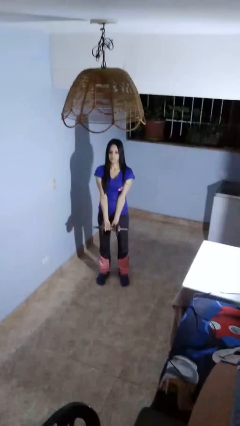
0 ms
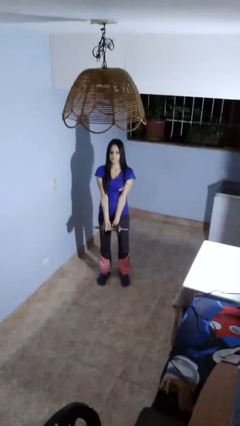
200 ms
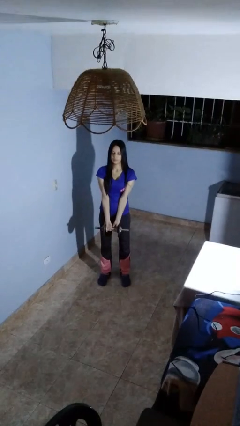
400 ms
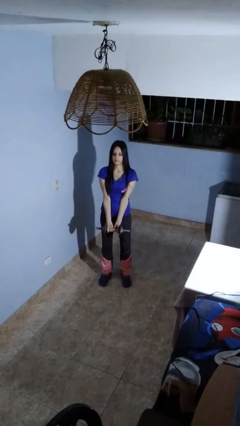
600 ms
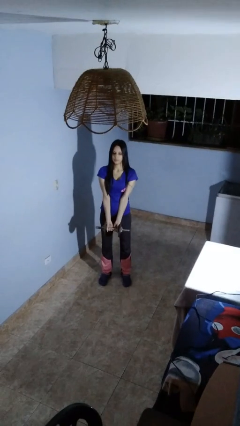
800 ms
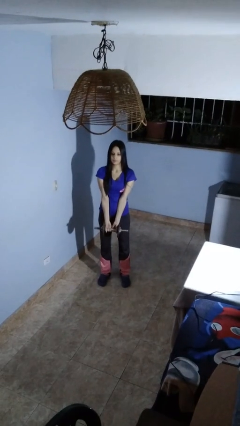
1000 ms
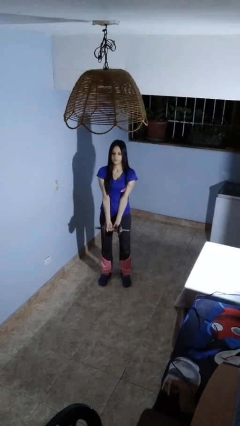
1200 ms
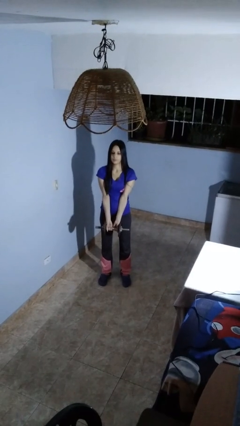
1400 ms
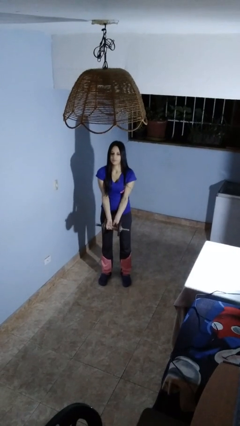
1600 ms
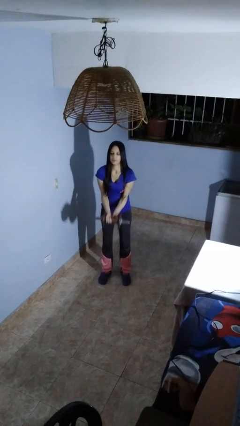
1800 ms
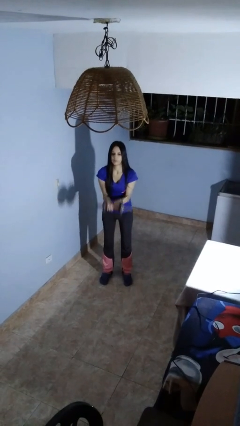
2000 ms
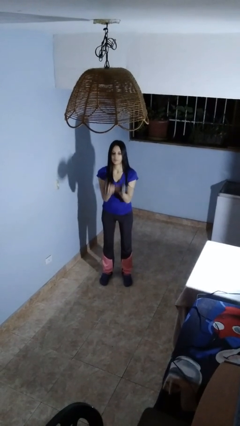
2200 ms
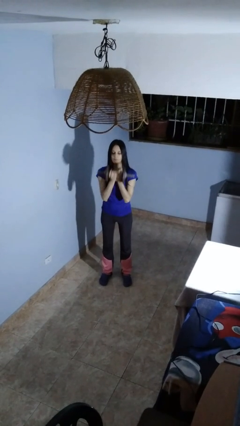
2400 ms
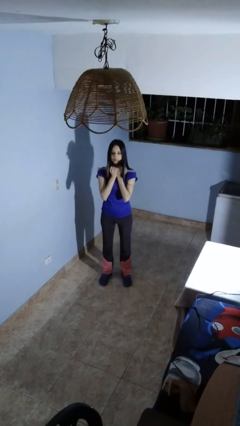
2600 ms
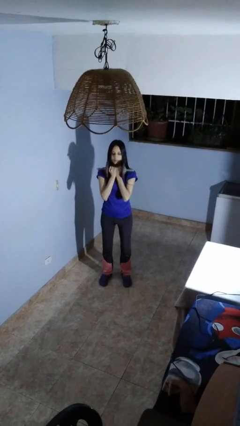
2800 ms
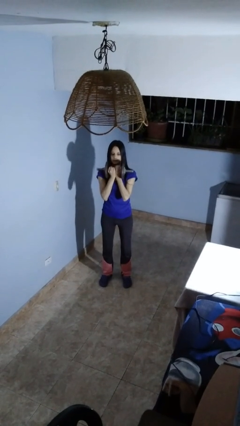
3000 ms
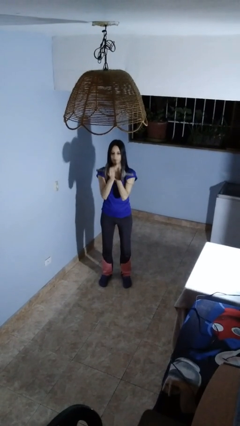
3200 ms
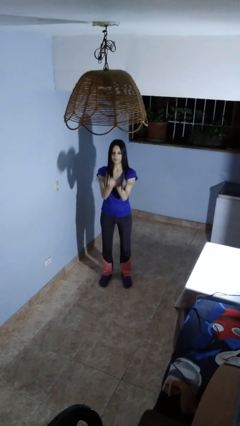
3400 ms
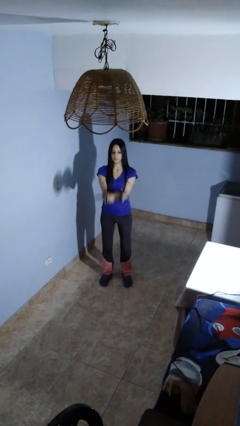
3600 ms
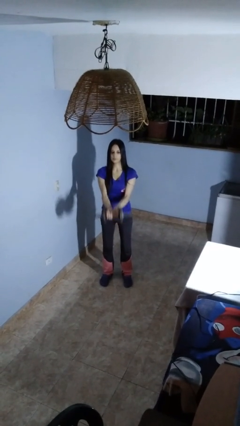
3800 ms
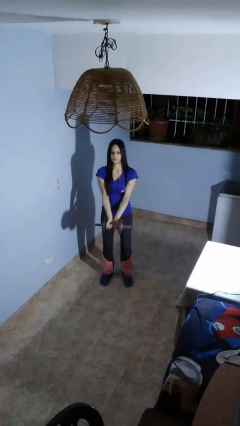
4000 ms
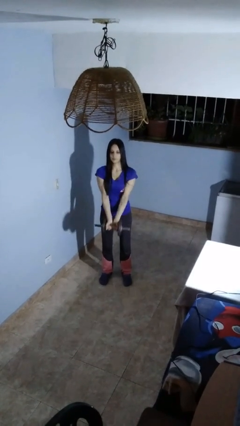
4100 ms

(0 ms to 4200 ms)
person lifts dumbbells

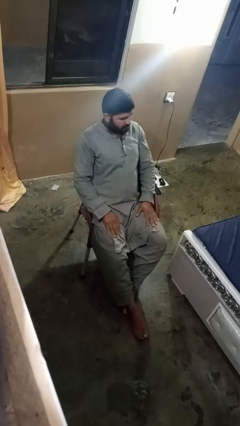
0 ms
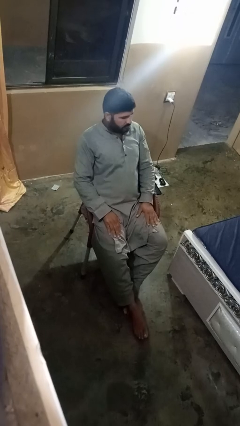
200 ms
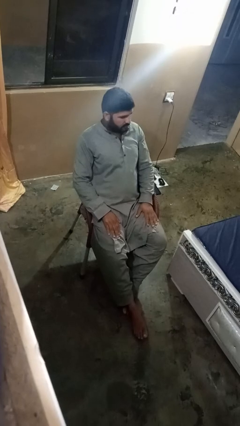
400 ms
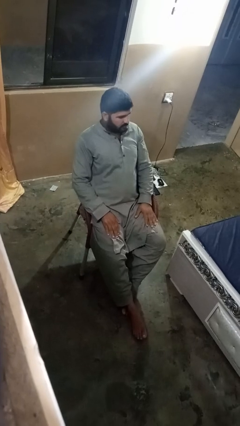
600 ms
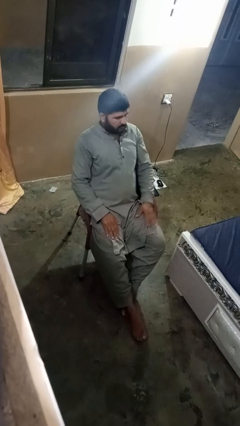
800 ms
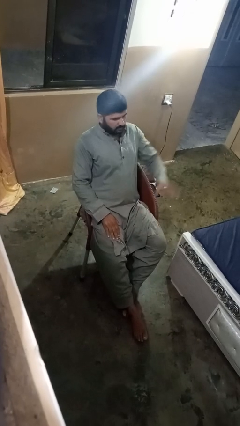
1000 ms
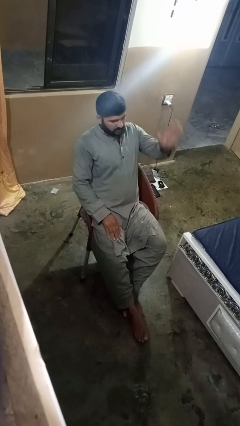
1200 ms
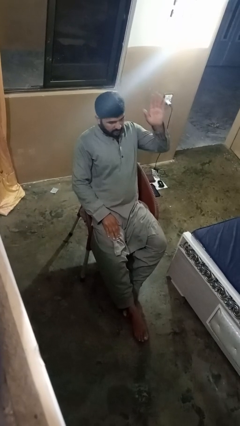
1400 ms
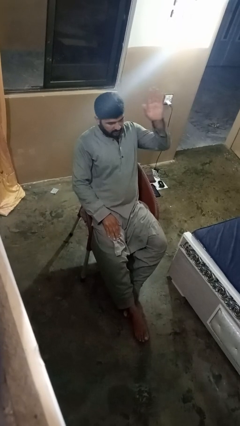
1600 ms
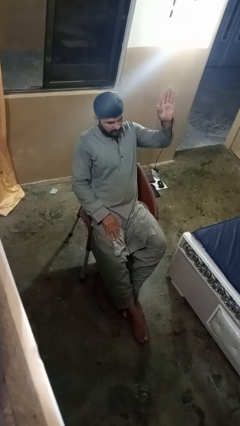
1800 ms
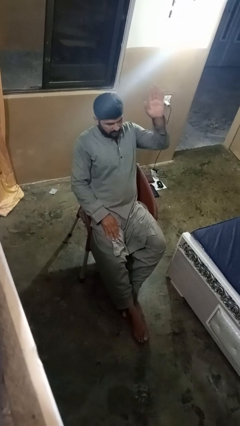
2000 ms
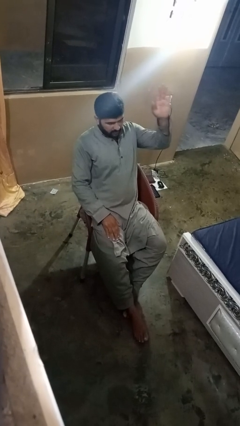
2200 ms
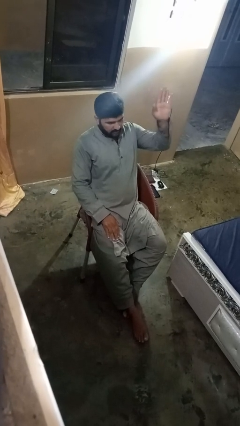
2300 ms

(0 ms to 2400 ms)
person gestures number five

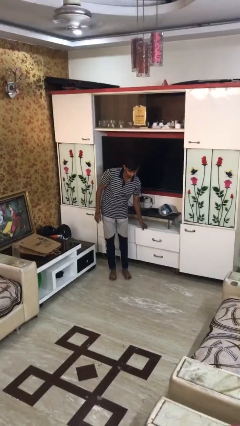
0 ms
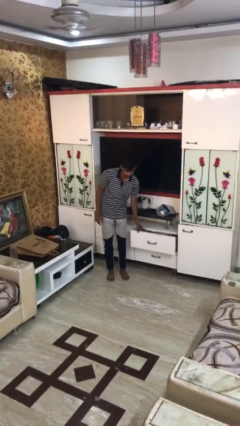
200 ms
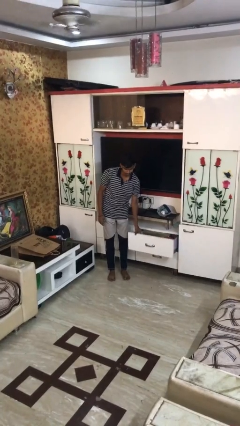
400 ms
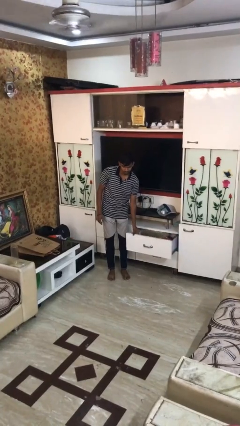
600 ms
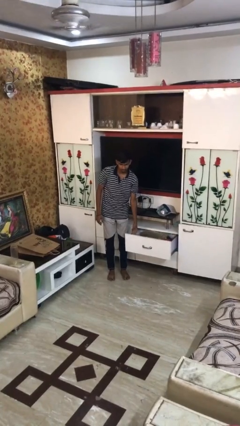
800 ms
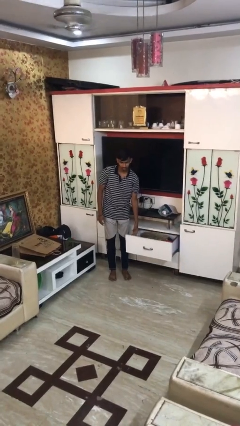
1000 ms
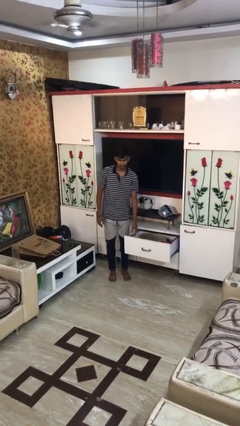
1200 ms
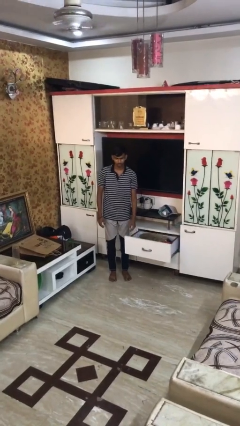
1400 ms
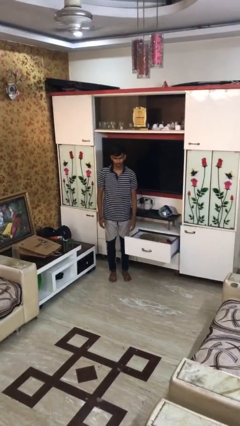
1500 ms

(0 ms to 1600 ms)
person opens dresser drawer

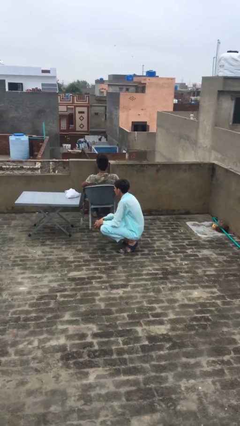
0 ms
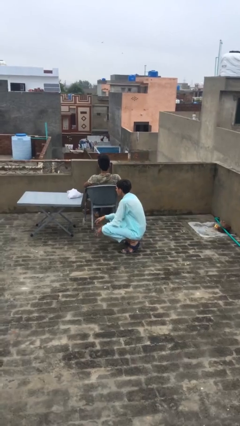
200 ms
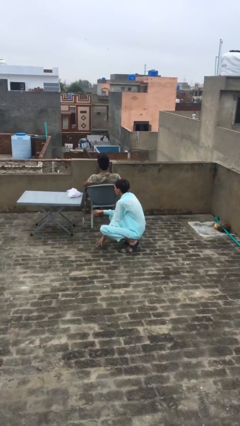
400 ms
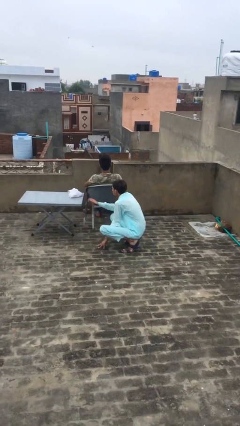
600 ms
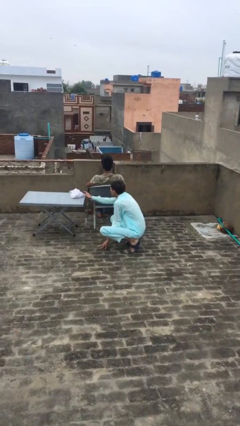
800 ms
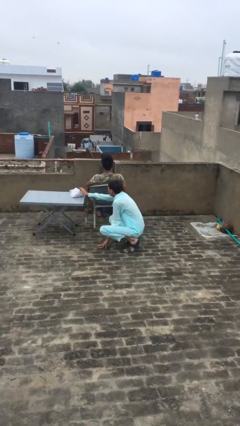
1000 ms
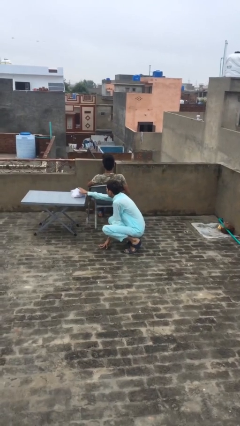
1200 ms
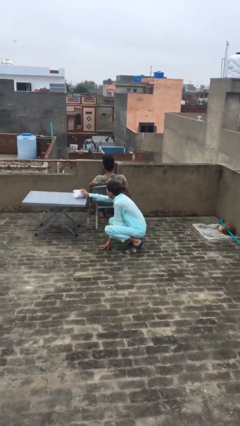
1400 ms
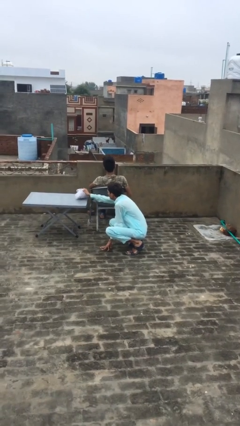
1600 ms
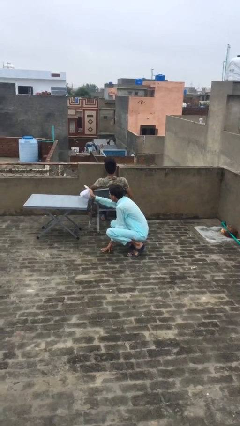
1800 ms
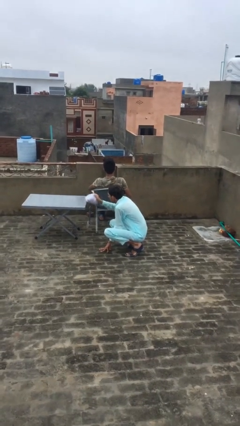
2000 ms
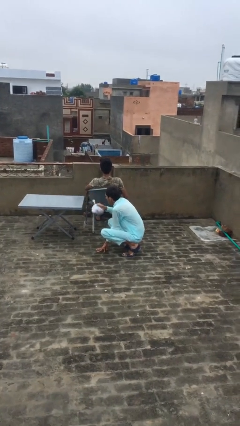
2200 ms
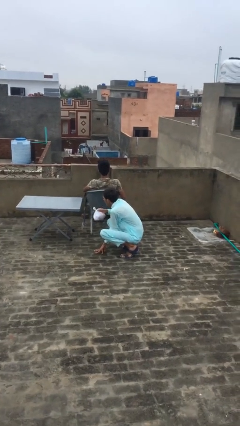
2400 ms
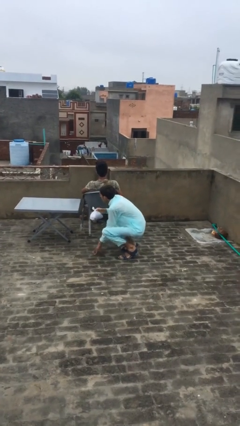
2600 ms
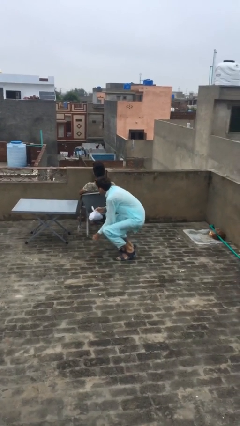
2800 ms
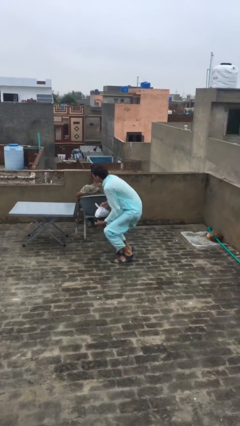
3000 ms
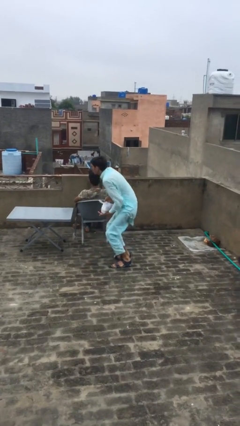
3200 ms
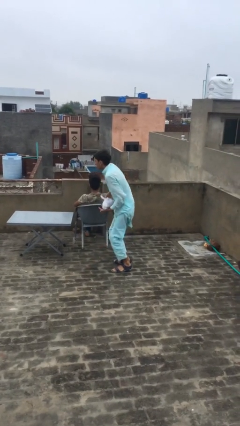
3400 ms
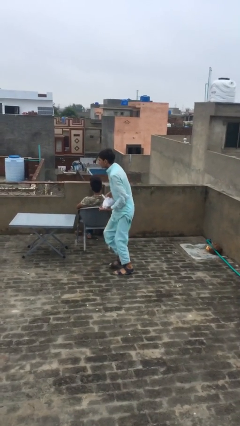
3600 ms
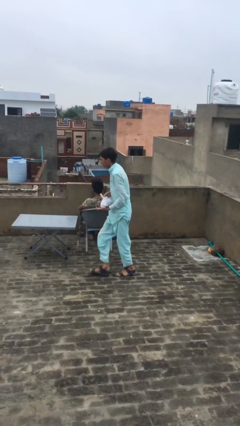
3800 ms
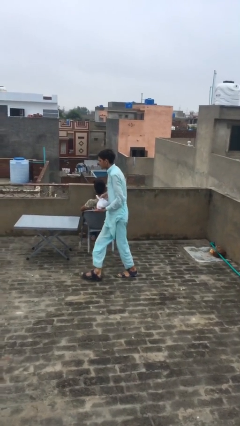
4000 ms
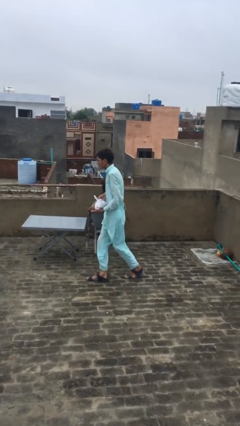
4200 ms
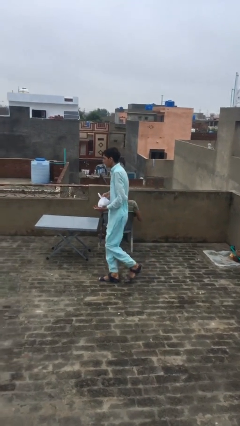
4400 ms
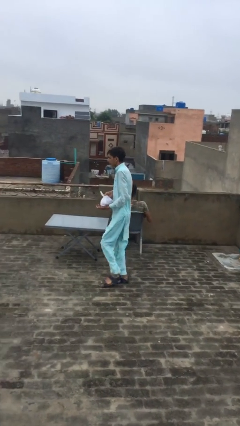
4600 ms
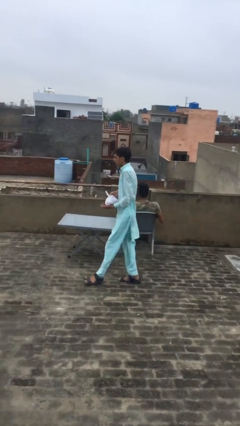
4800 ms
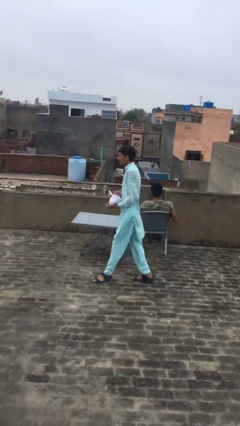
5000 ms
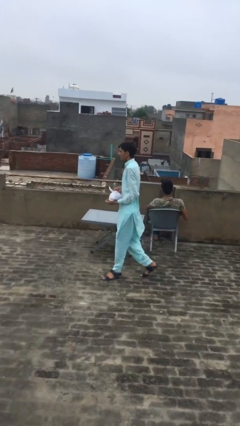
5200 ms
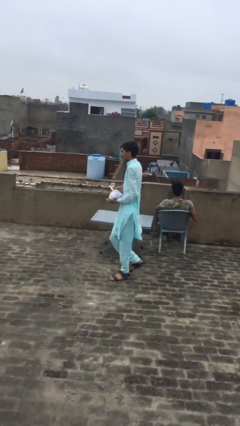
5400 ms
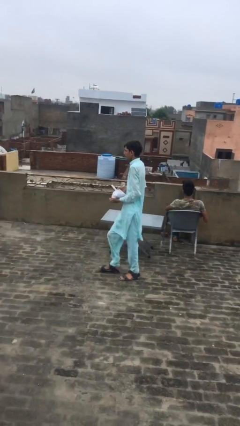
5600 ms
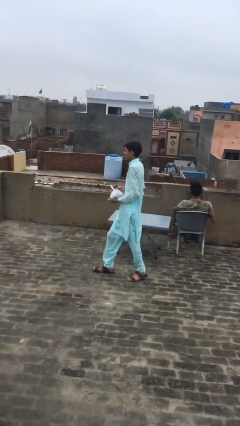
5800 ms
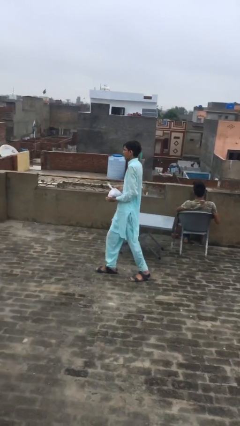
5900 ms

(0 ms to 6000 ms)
person steals object from person

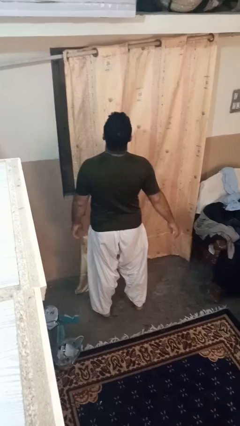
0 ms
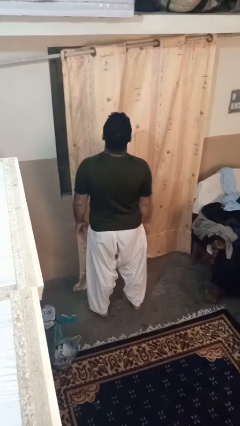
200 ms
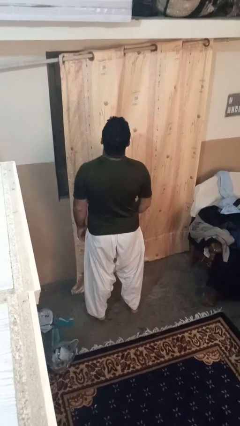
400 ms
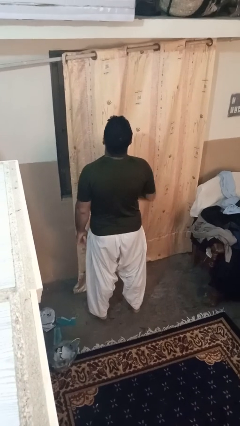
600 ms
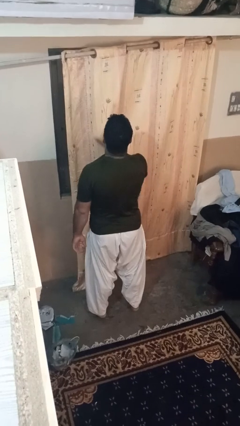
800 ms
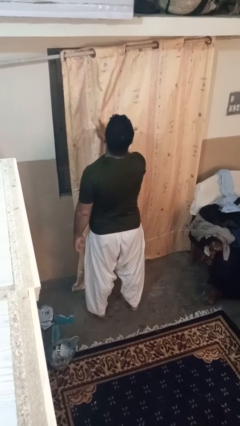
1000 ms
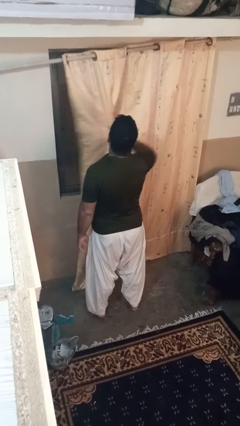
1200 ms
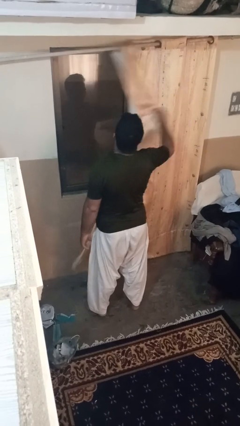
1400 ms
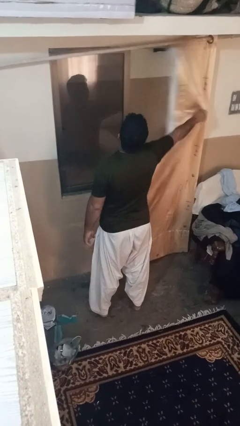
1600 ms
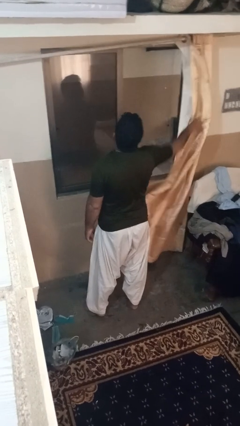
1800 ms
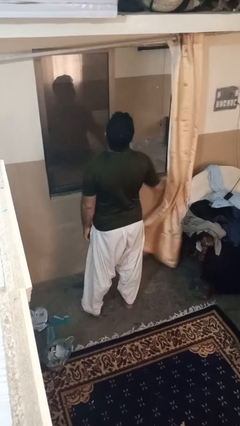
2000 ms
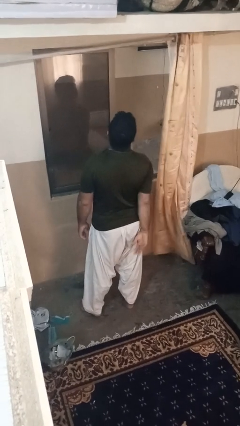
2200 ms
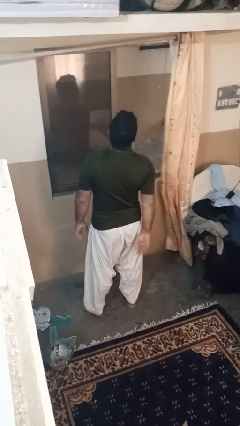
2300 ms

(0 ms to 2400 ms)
person opens curtains

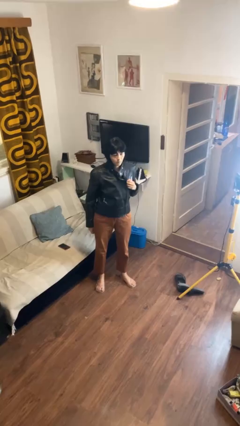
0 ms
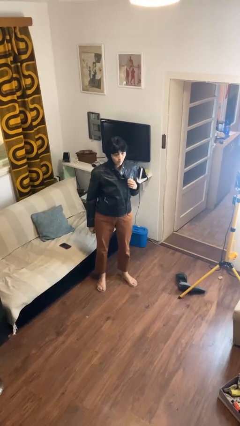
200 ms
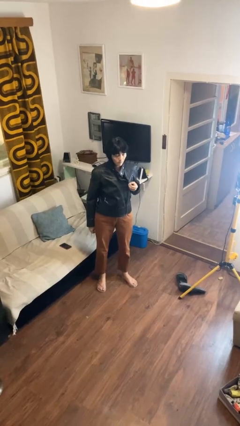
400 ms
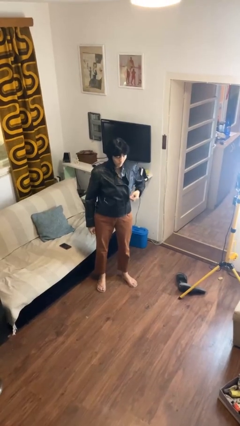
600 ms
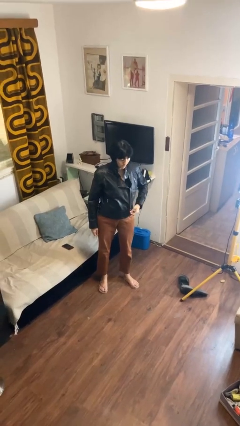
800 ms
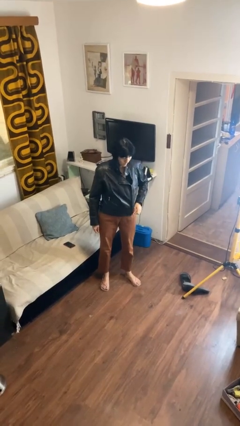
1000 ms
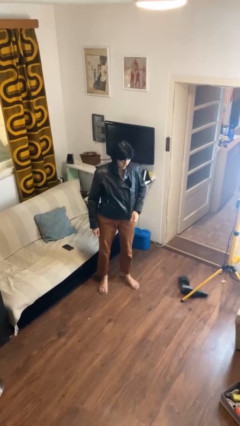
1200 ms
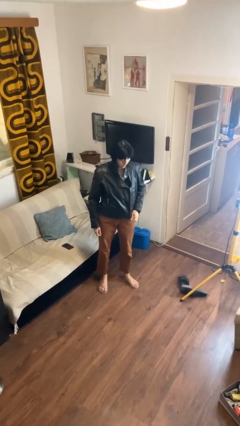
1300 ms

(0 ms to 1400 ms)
person unzips jacket
